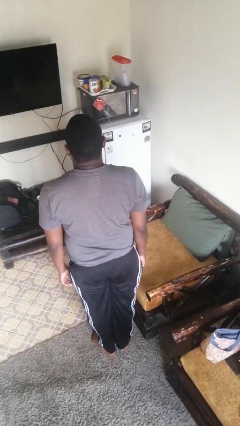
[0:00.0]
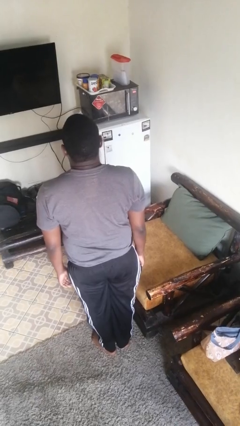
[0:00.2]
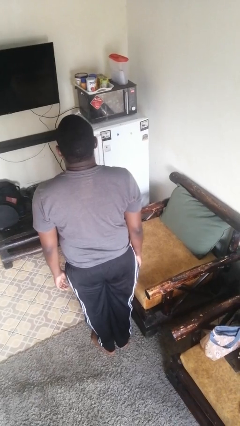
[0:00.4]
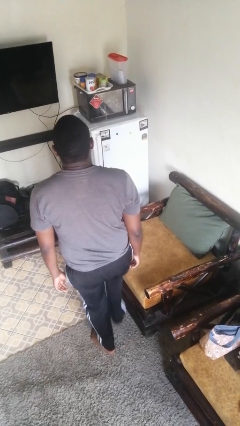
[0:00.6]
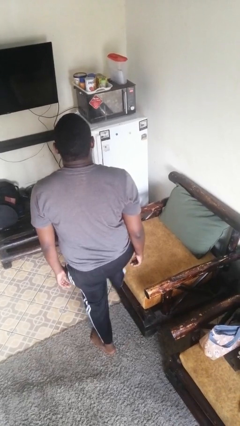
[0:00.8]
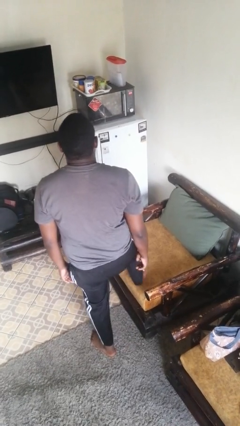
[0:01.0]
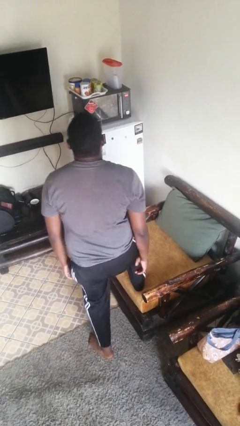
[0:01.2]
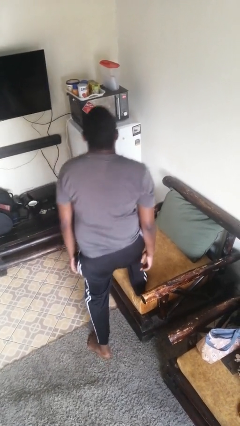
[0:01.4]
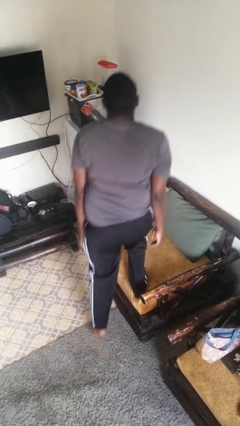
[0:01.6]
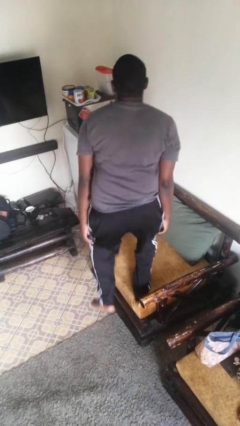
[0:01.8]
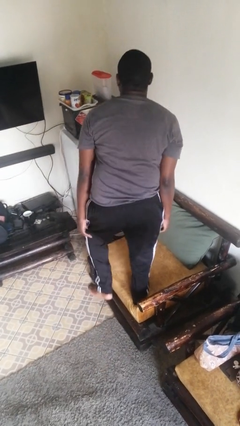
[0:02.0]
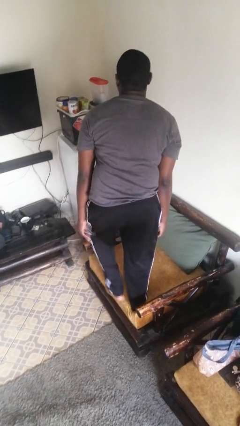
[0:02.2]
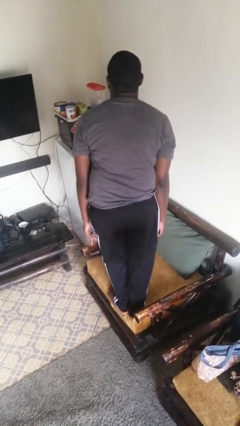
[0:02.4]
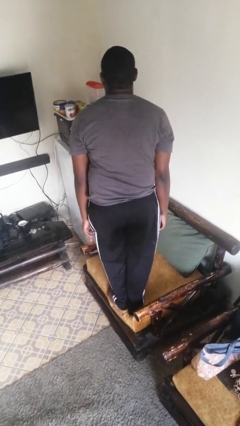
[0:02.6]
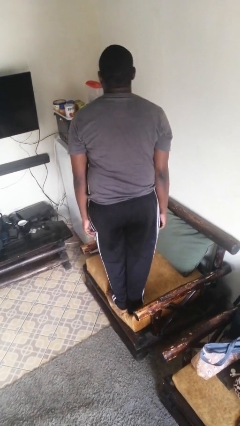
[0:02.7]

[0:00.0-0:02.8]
person climbs on couch

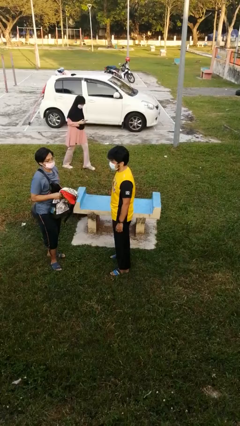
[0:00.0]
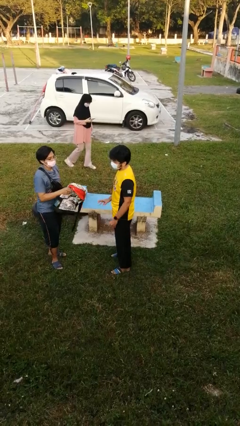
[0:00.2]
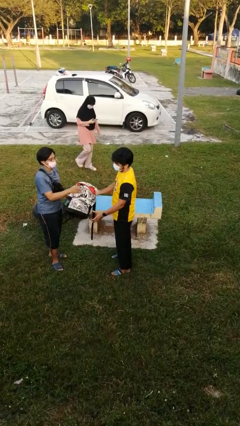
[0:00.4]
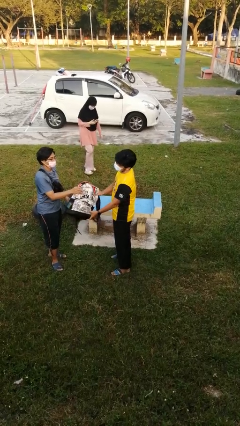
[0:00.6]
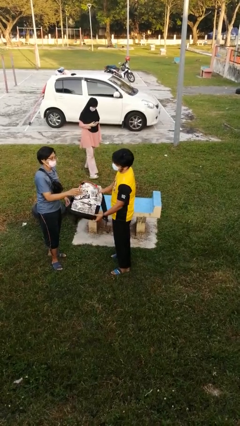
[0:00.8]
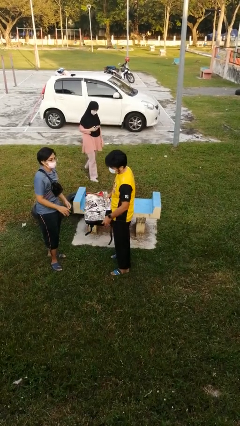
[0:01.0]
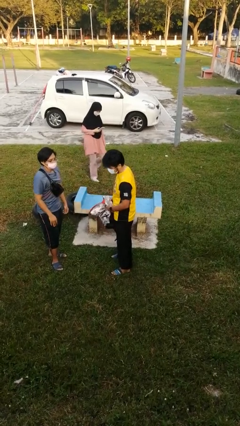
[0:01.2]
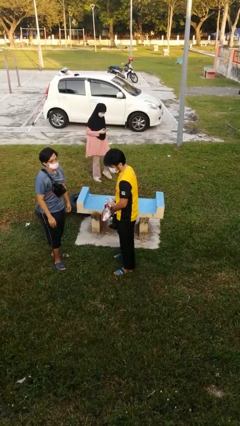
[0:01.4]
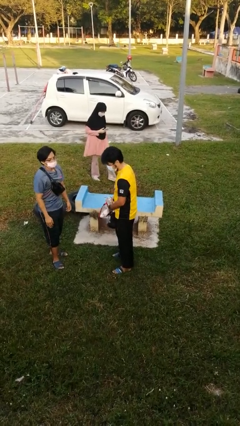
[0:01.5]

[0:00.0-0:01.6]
person transfers object to person

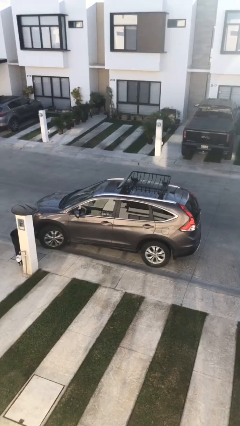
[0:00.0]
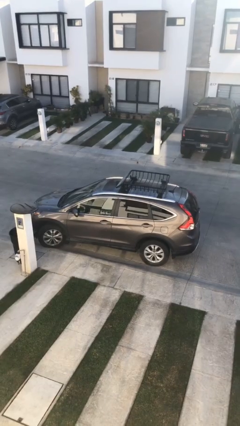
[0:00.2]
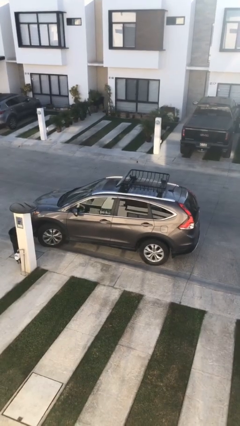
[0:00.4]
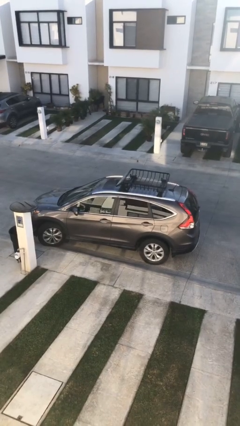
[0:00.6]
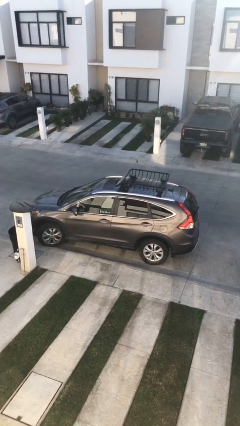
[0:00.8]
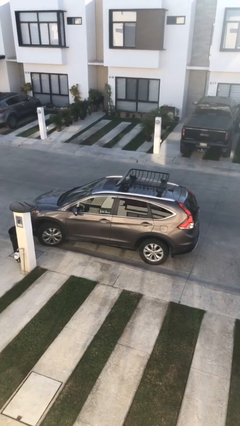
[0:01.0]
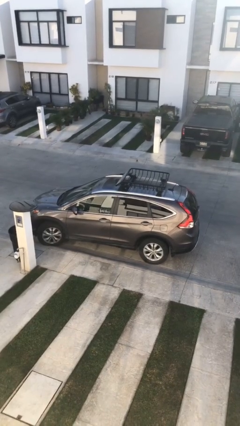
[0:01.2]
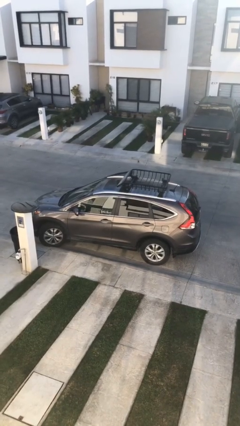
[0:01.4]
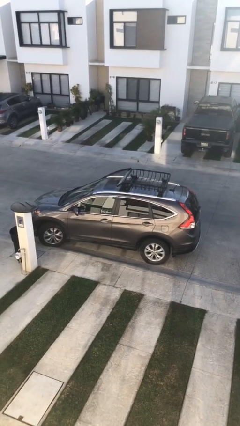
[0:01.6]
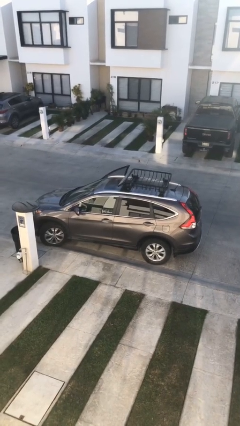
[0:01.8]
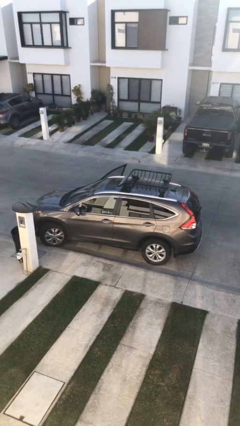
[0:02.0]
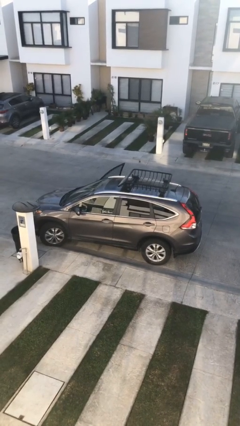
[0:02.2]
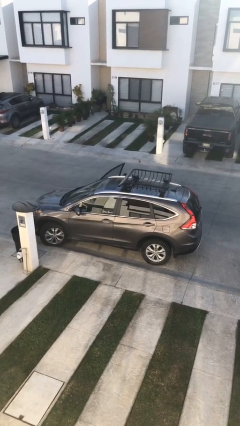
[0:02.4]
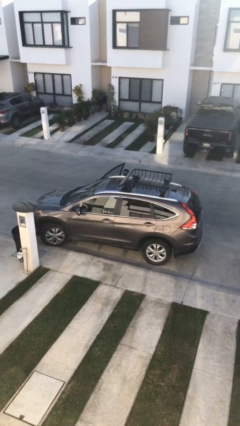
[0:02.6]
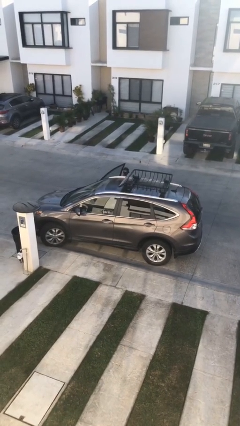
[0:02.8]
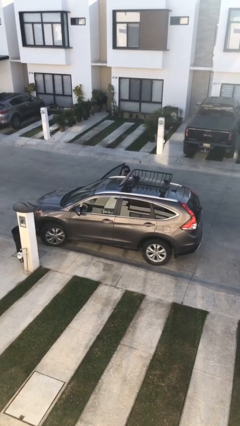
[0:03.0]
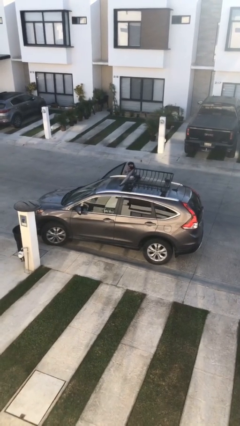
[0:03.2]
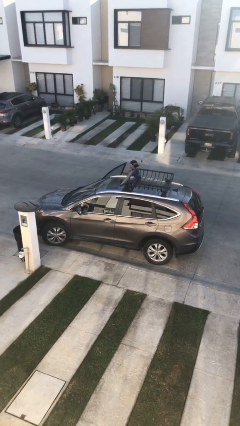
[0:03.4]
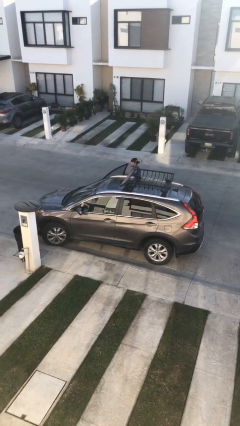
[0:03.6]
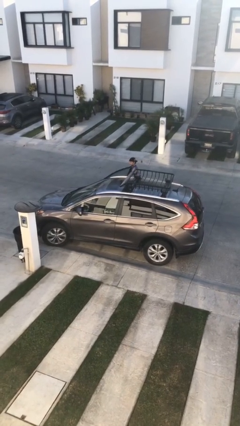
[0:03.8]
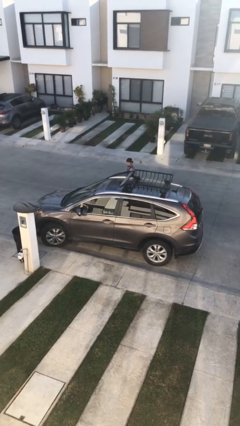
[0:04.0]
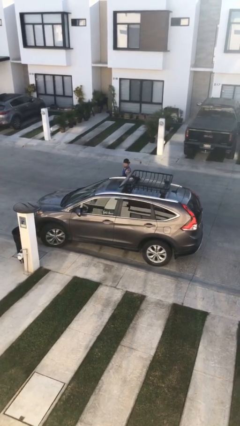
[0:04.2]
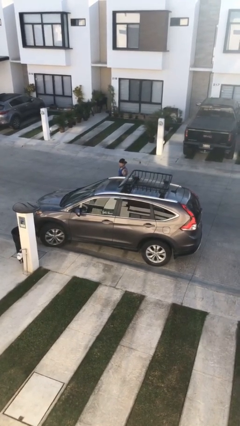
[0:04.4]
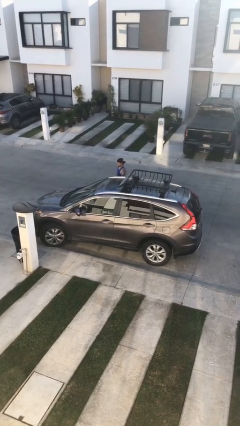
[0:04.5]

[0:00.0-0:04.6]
car drops off person

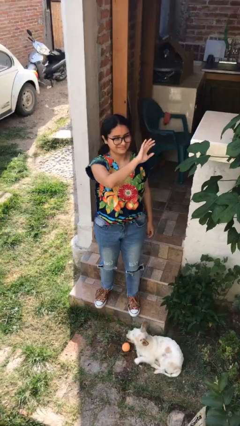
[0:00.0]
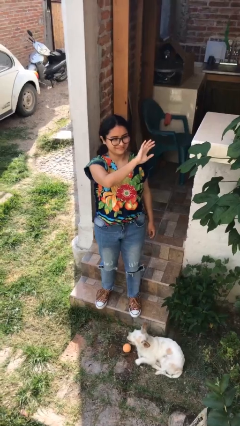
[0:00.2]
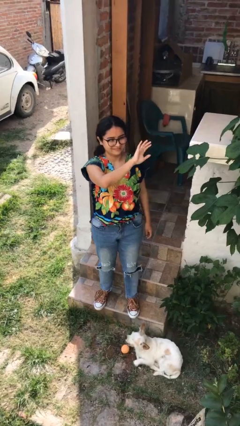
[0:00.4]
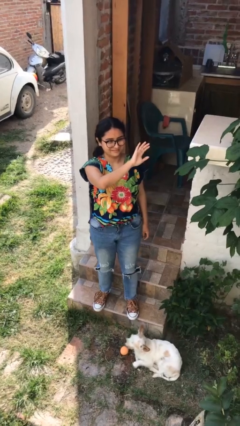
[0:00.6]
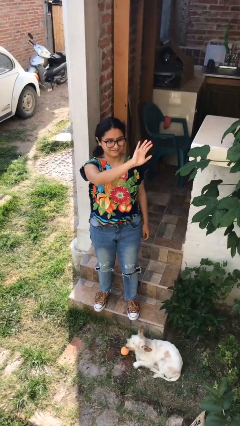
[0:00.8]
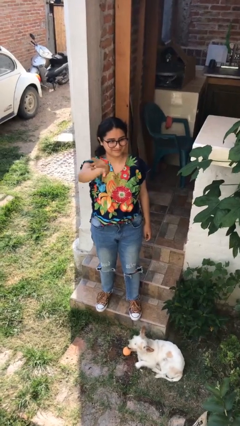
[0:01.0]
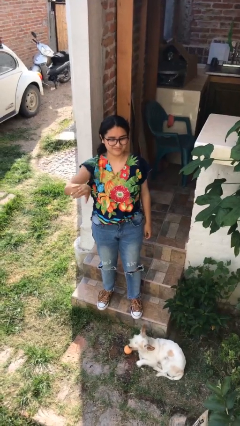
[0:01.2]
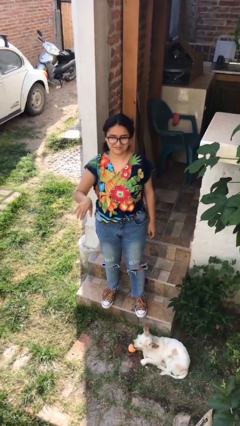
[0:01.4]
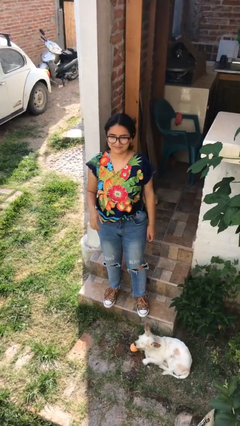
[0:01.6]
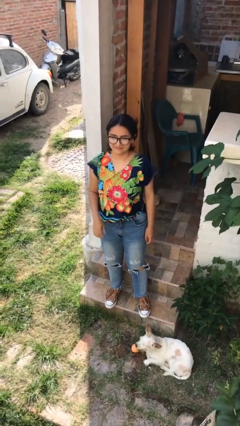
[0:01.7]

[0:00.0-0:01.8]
person gestures swipe right

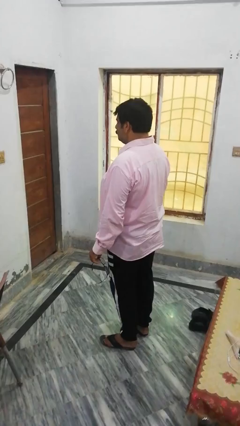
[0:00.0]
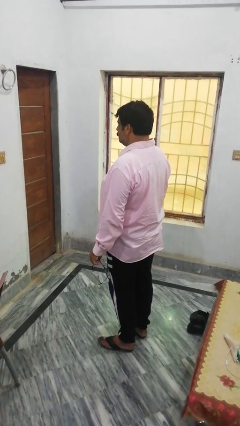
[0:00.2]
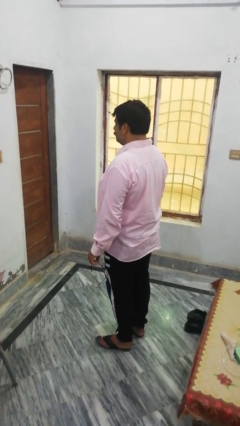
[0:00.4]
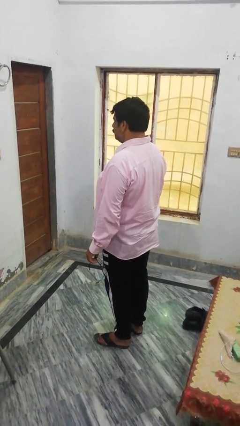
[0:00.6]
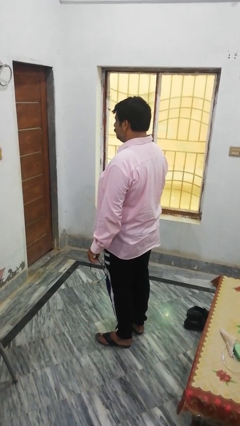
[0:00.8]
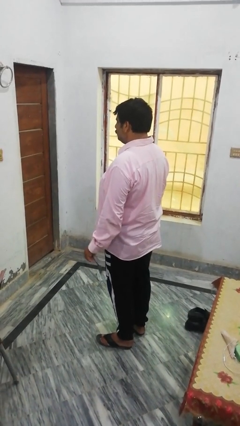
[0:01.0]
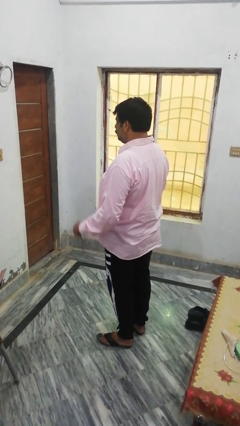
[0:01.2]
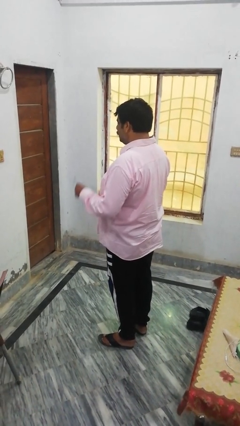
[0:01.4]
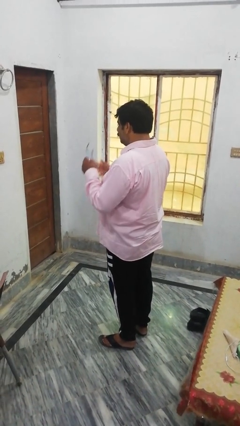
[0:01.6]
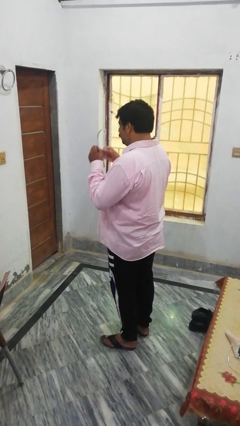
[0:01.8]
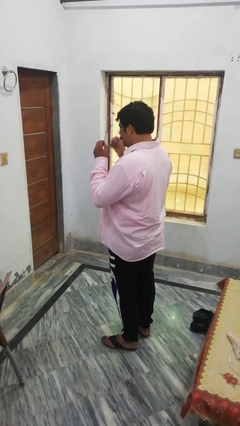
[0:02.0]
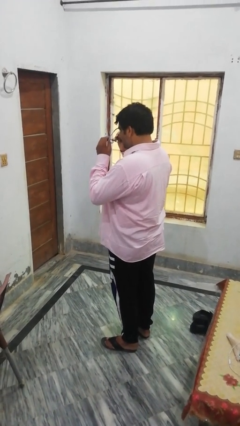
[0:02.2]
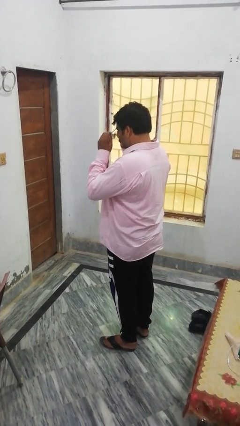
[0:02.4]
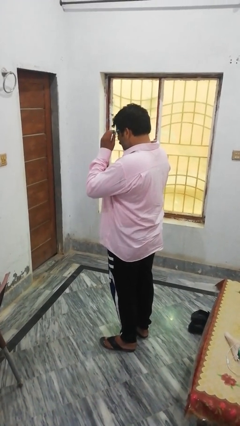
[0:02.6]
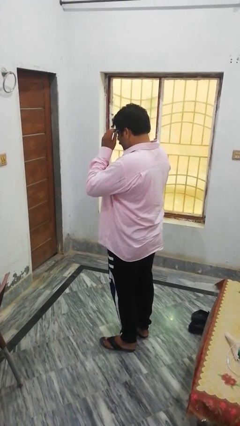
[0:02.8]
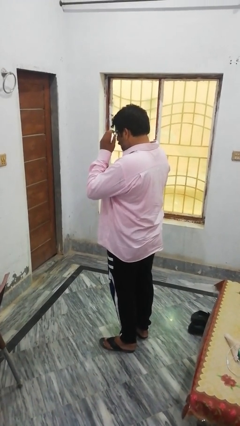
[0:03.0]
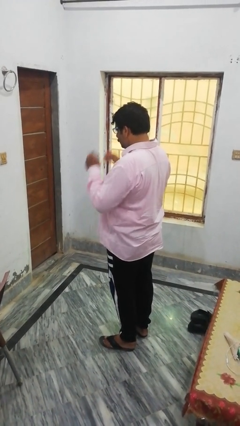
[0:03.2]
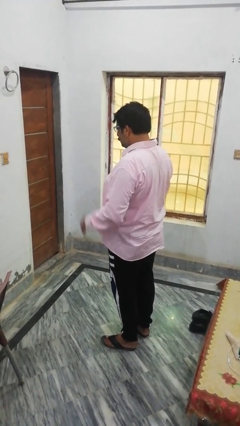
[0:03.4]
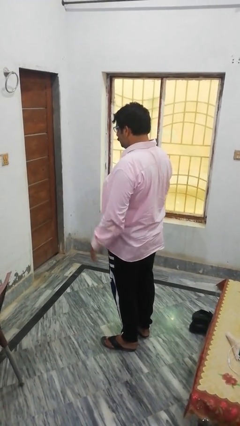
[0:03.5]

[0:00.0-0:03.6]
person puts on glasses

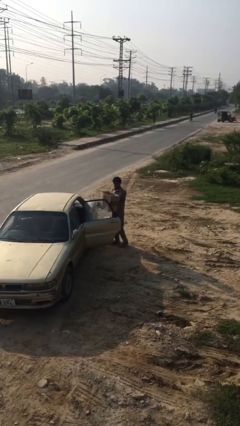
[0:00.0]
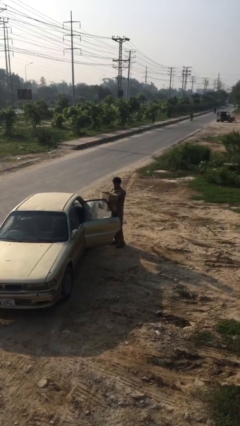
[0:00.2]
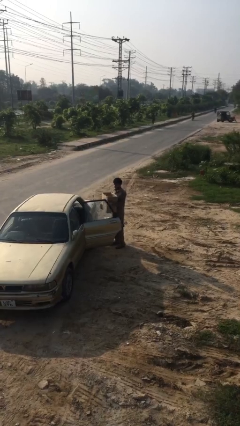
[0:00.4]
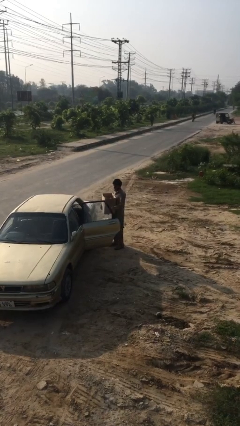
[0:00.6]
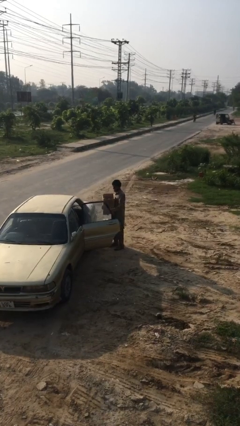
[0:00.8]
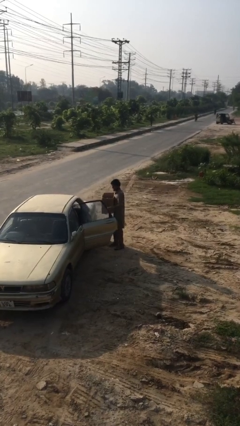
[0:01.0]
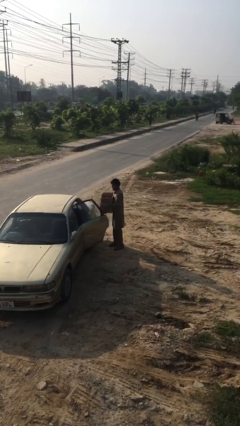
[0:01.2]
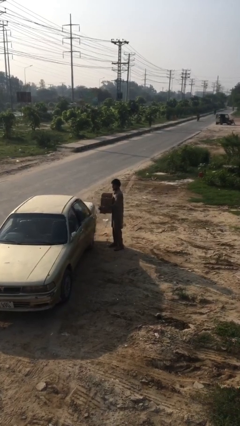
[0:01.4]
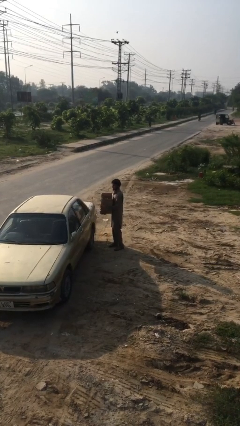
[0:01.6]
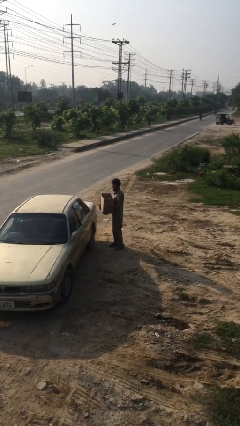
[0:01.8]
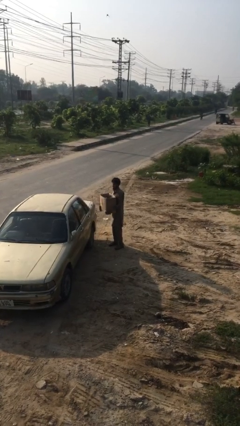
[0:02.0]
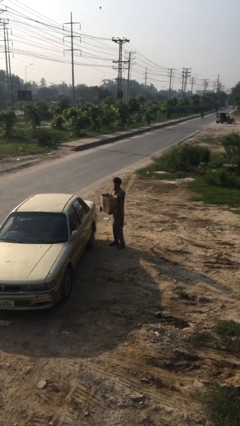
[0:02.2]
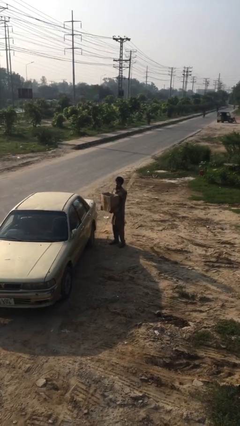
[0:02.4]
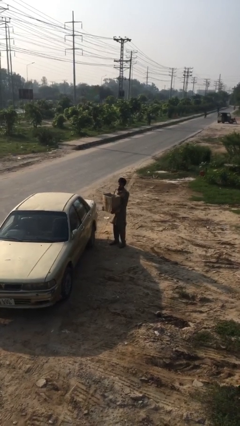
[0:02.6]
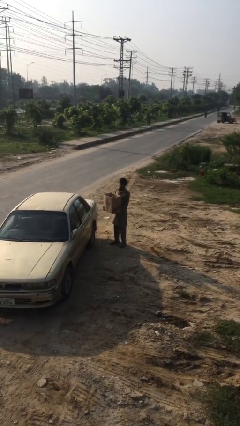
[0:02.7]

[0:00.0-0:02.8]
person closes car door

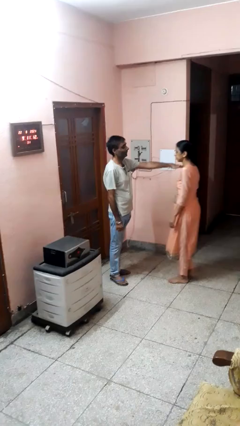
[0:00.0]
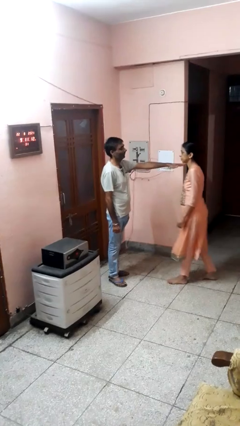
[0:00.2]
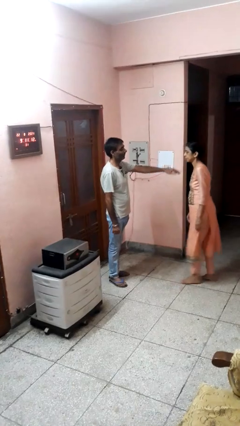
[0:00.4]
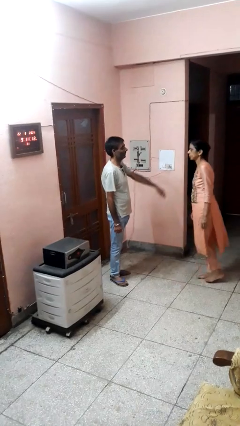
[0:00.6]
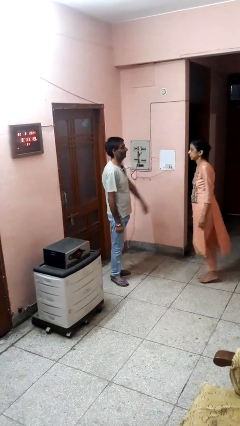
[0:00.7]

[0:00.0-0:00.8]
person shoves person
